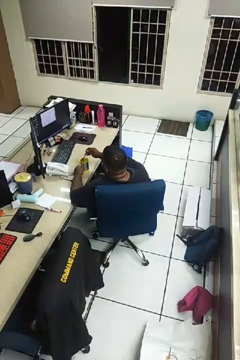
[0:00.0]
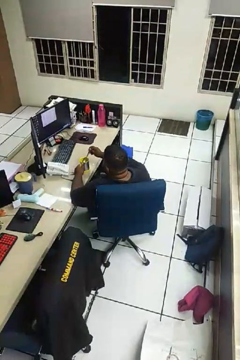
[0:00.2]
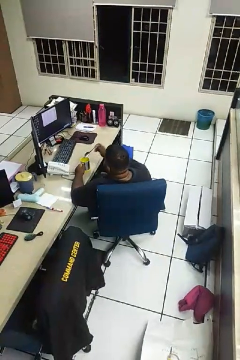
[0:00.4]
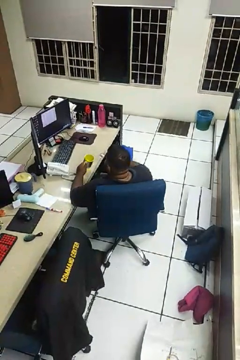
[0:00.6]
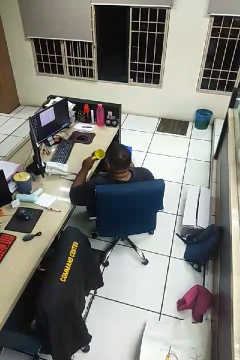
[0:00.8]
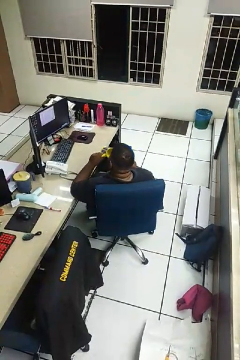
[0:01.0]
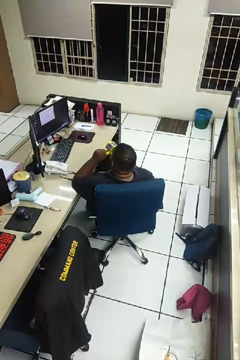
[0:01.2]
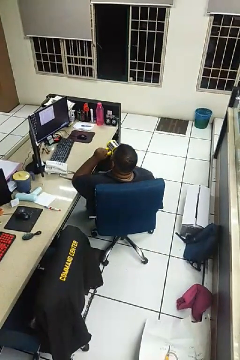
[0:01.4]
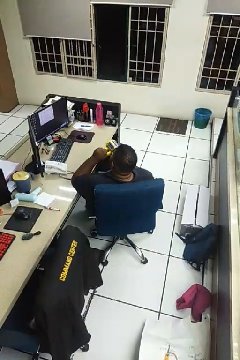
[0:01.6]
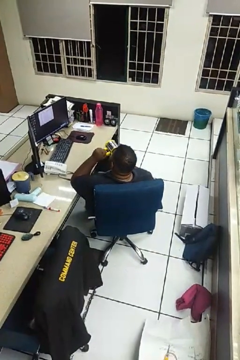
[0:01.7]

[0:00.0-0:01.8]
person drinks from mug

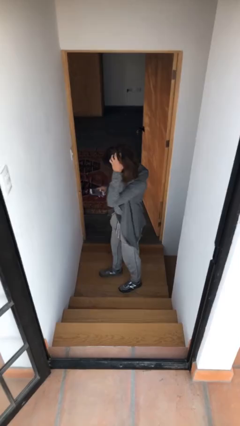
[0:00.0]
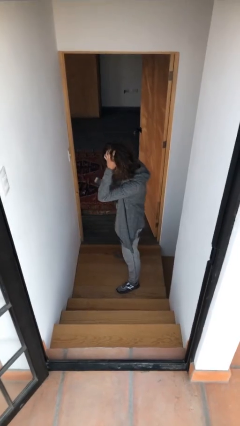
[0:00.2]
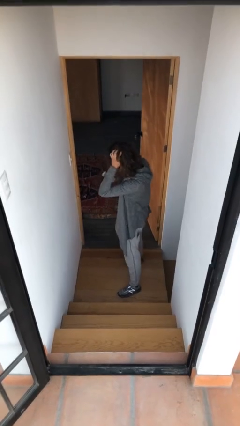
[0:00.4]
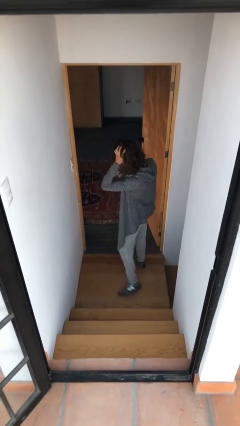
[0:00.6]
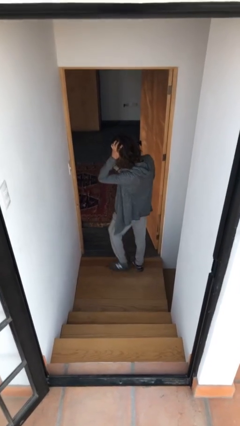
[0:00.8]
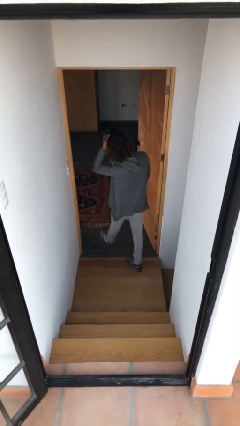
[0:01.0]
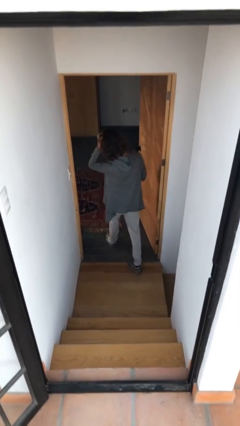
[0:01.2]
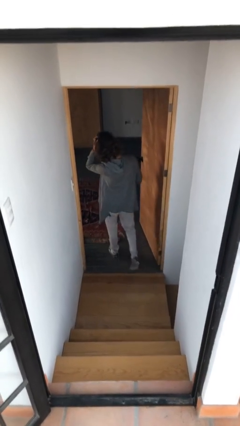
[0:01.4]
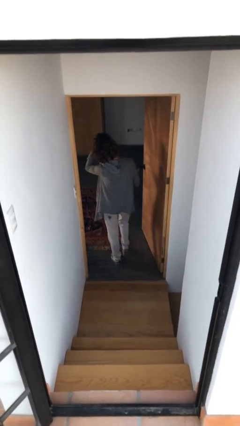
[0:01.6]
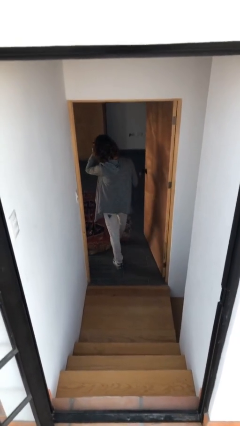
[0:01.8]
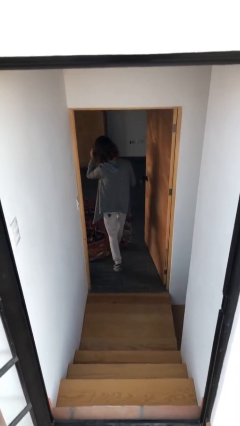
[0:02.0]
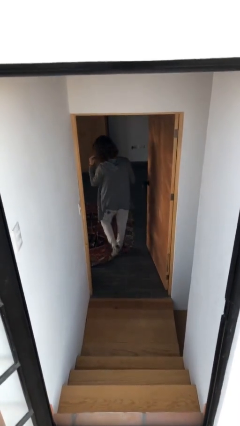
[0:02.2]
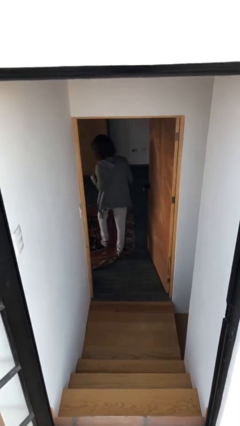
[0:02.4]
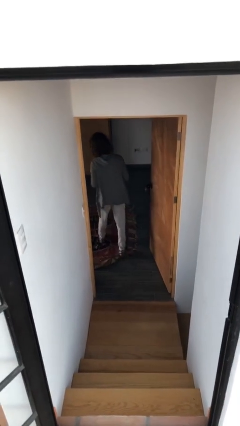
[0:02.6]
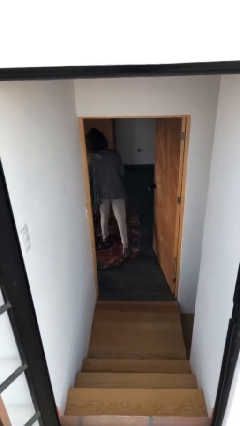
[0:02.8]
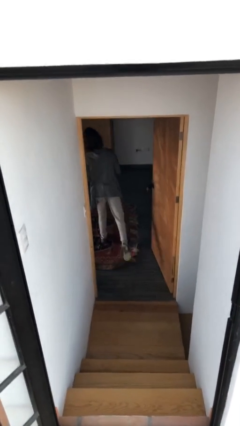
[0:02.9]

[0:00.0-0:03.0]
person exits scene through structure

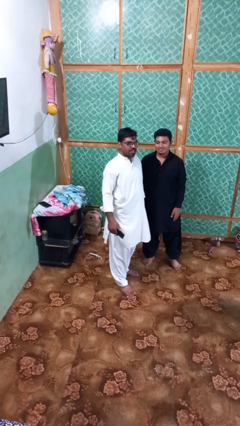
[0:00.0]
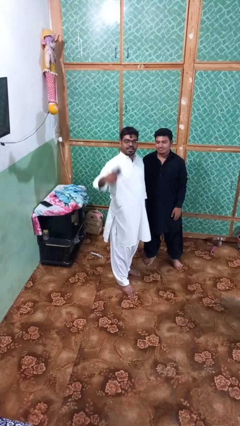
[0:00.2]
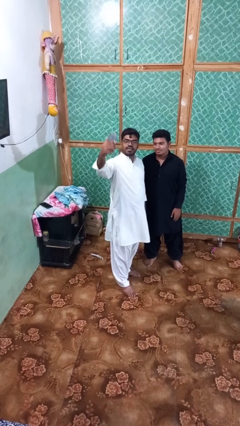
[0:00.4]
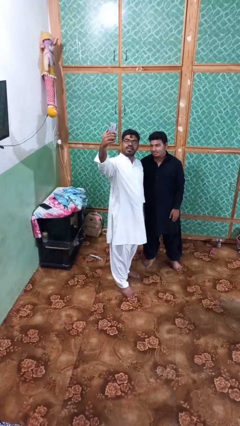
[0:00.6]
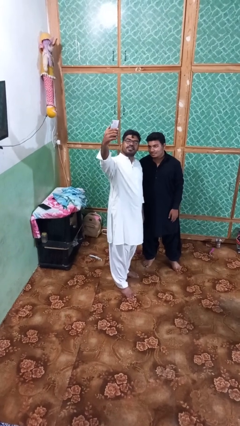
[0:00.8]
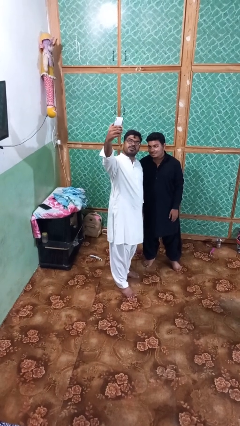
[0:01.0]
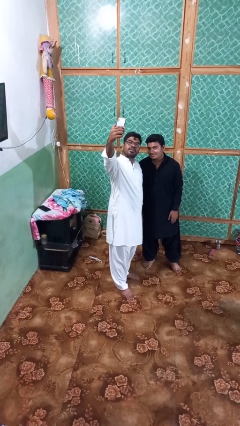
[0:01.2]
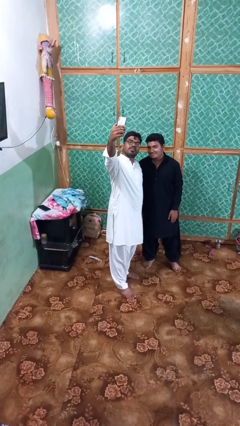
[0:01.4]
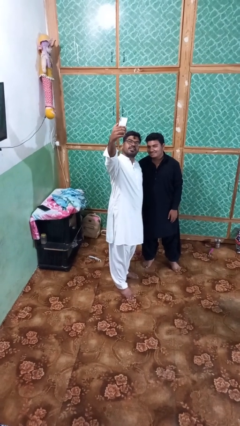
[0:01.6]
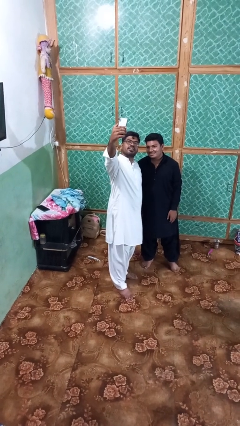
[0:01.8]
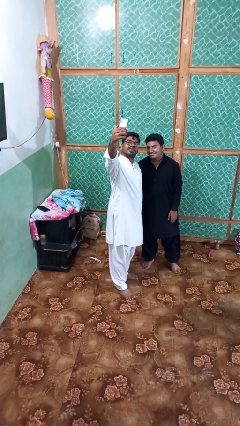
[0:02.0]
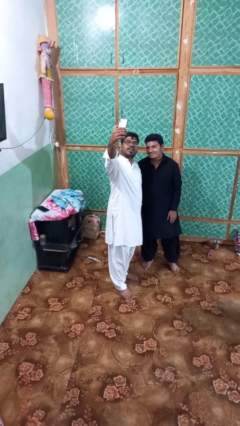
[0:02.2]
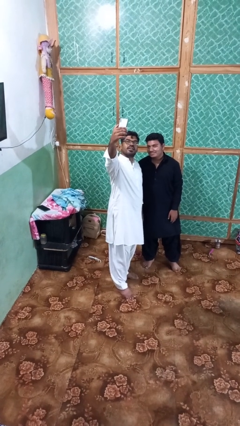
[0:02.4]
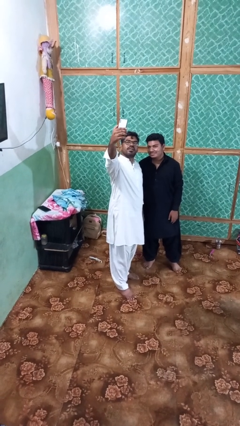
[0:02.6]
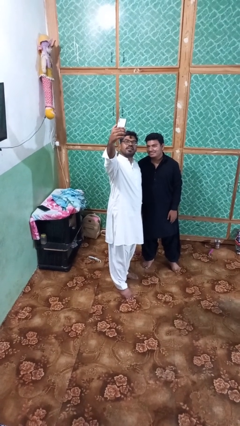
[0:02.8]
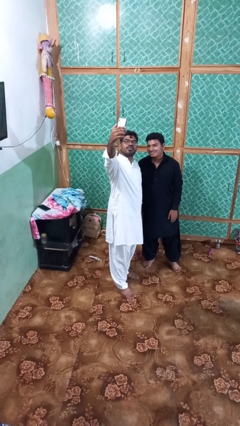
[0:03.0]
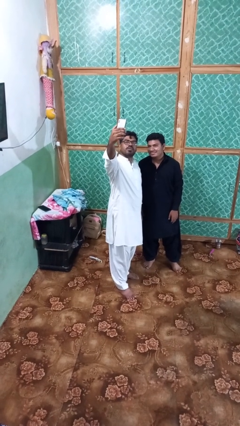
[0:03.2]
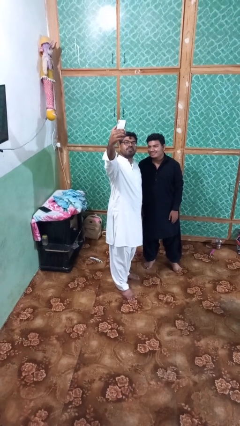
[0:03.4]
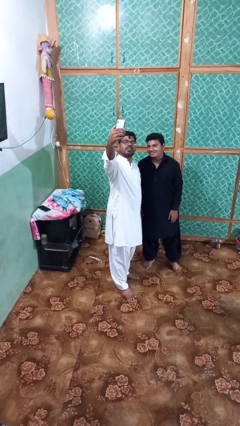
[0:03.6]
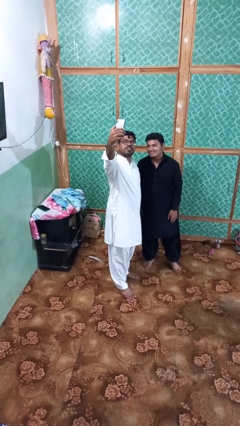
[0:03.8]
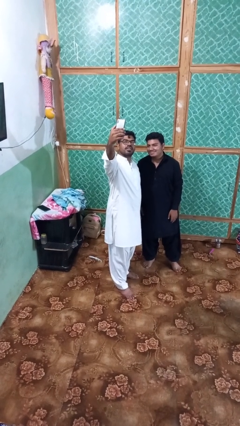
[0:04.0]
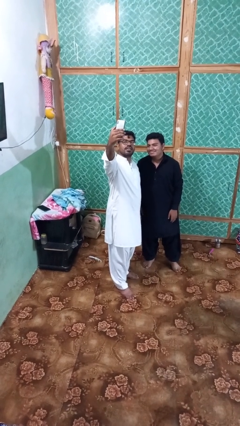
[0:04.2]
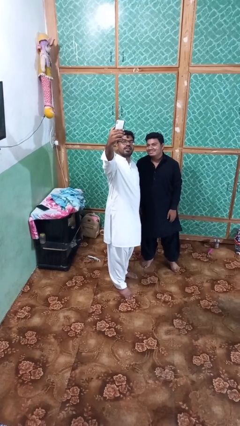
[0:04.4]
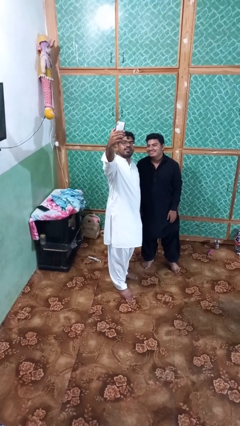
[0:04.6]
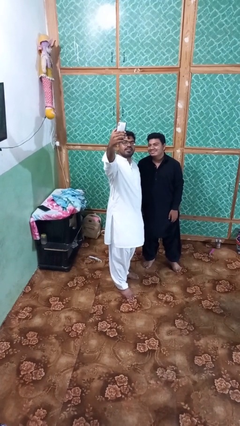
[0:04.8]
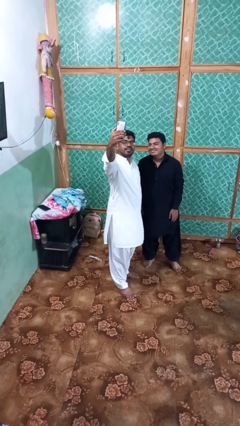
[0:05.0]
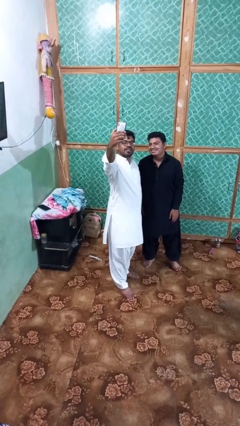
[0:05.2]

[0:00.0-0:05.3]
person takes selfie with person

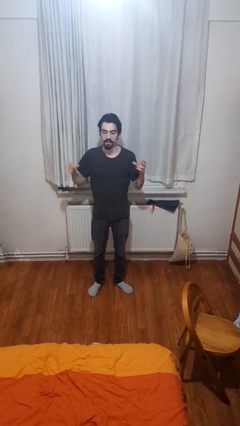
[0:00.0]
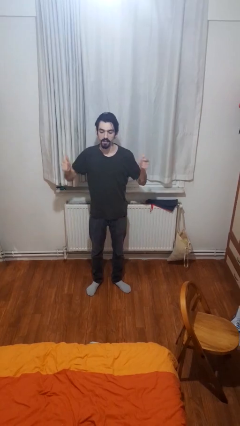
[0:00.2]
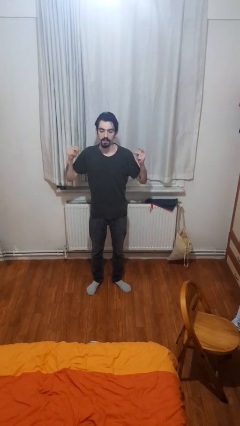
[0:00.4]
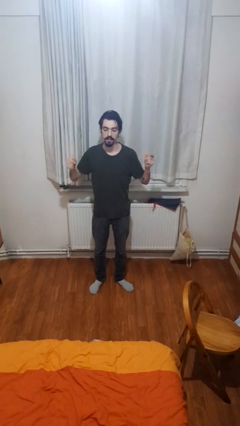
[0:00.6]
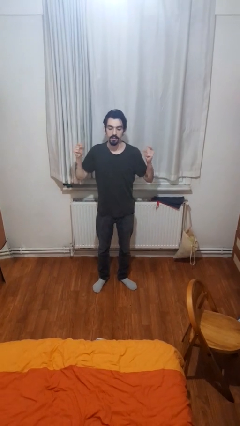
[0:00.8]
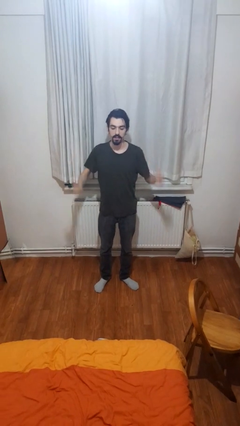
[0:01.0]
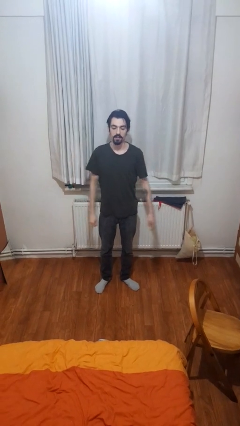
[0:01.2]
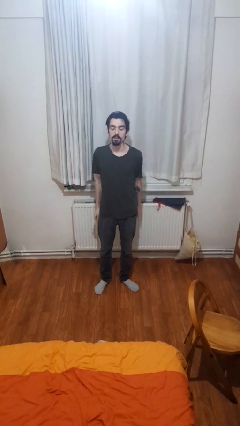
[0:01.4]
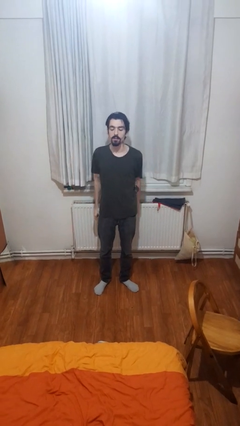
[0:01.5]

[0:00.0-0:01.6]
person snaps fingers

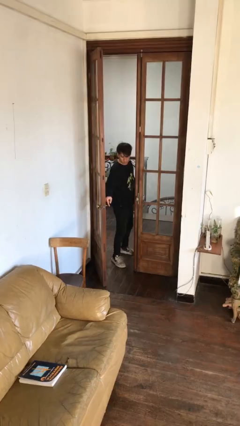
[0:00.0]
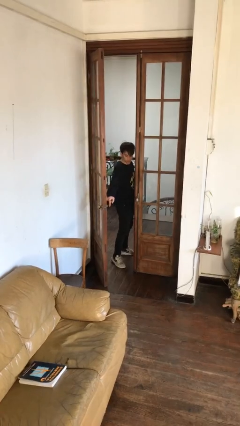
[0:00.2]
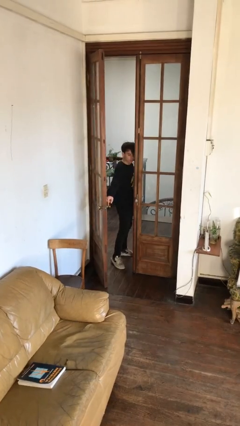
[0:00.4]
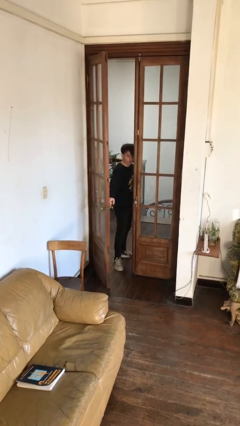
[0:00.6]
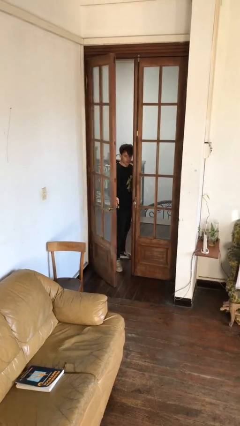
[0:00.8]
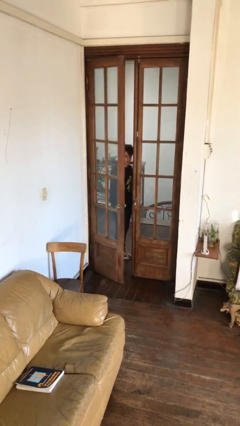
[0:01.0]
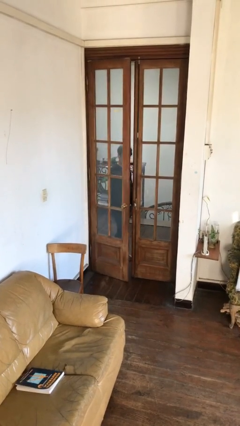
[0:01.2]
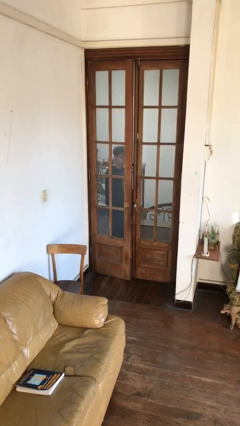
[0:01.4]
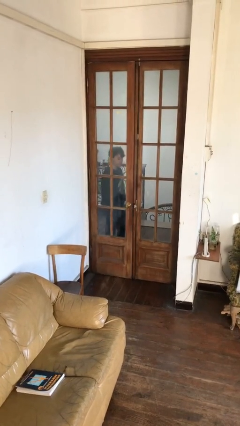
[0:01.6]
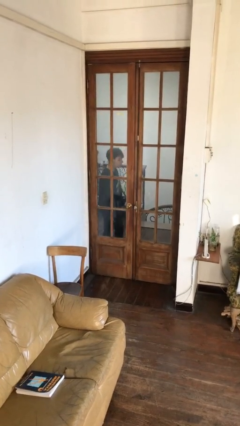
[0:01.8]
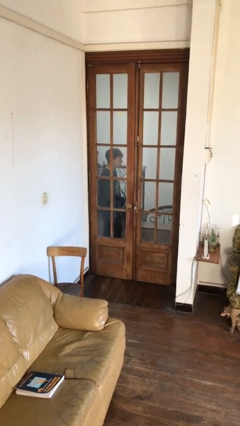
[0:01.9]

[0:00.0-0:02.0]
person closes facility door

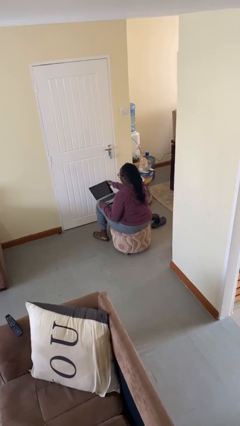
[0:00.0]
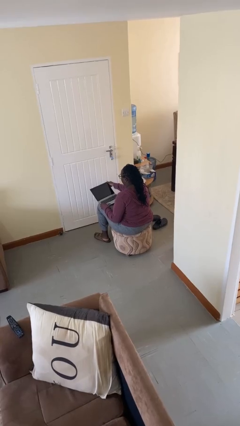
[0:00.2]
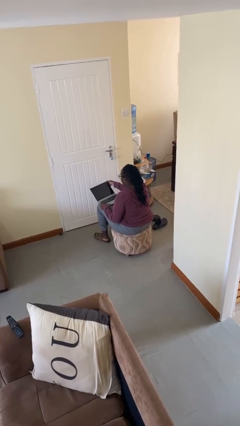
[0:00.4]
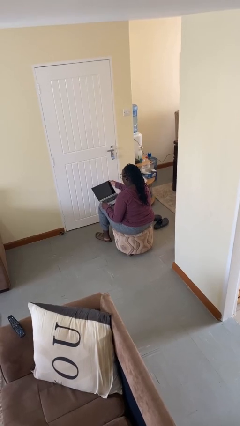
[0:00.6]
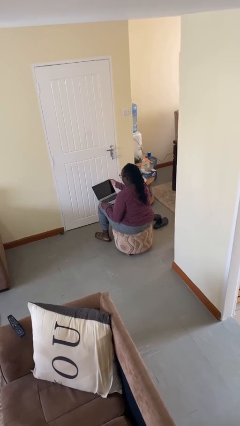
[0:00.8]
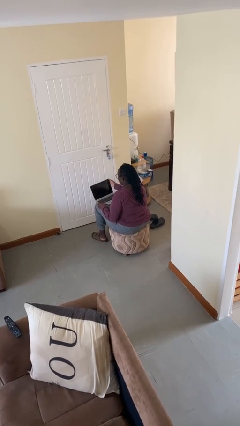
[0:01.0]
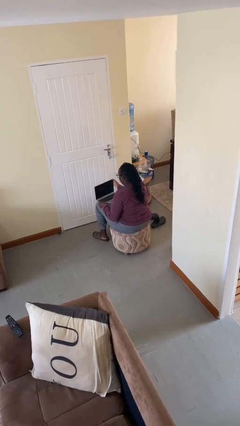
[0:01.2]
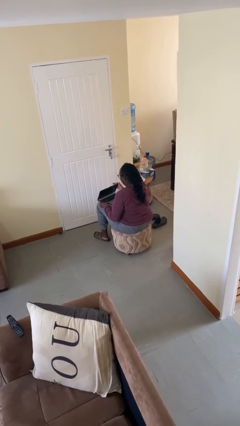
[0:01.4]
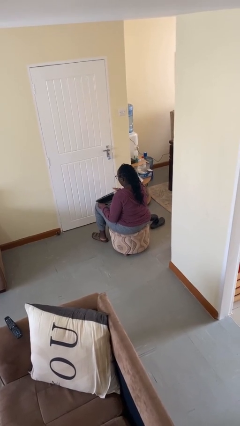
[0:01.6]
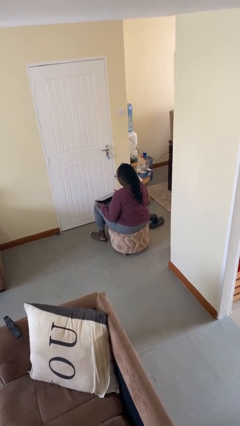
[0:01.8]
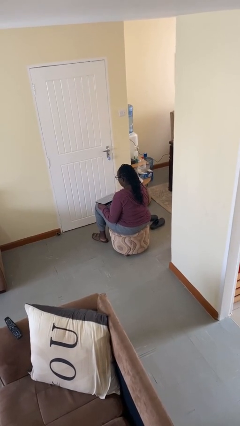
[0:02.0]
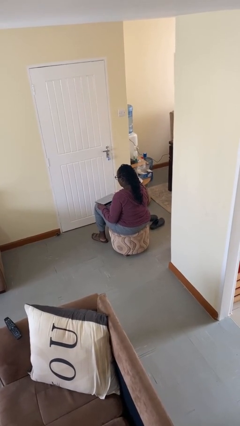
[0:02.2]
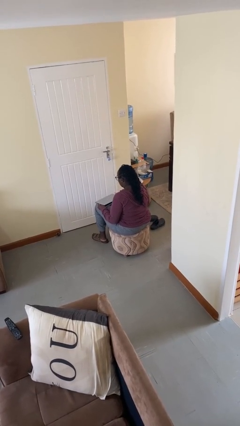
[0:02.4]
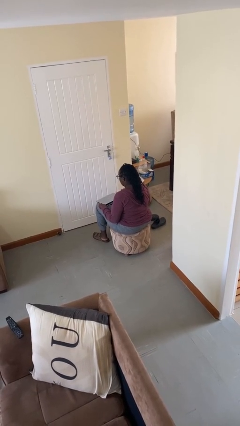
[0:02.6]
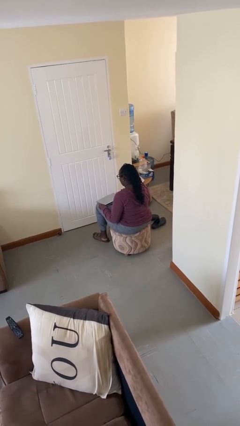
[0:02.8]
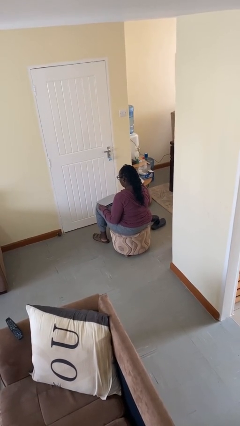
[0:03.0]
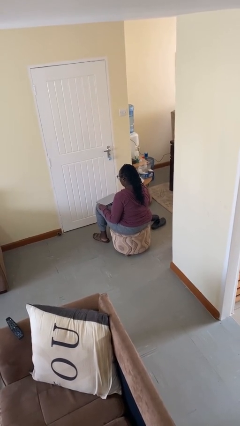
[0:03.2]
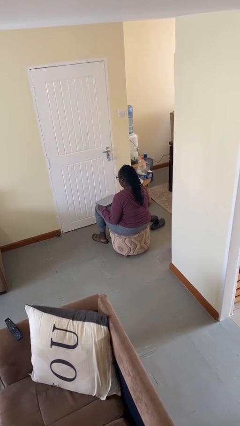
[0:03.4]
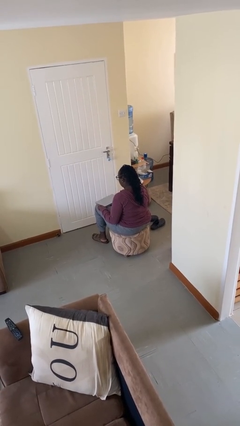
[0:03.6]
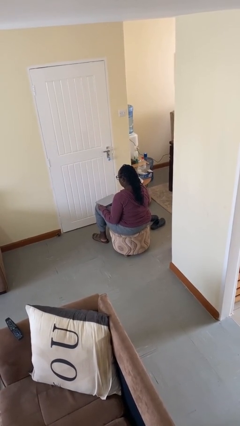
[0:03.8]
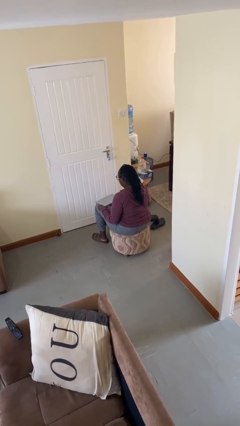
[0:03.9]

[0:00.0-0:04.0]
person closes laptop
